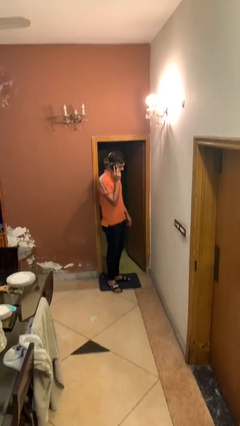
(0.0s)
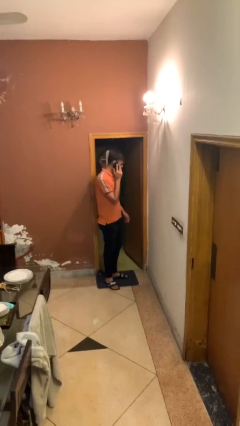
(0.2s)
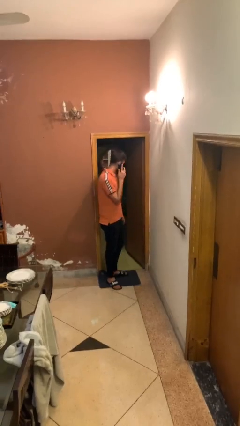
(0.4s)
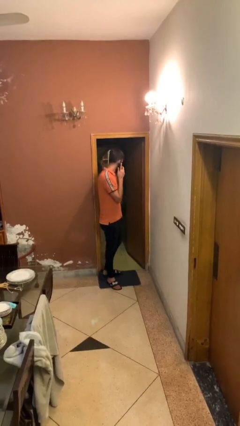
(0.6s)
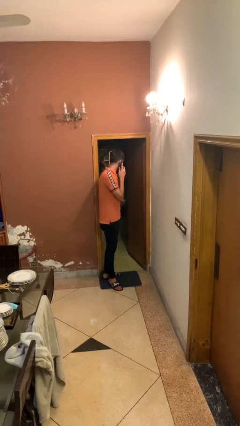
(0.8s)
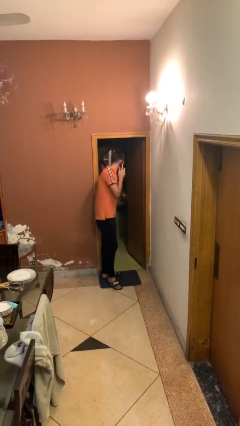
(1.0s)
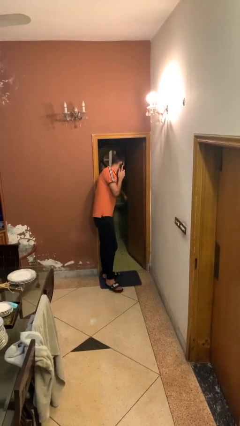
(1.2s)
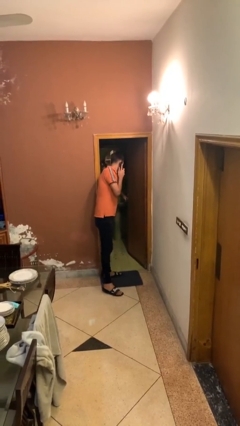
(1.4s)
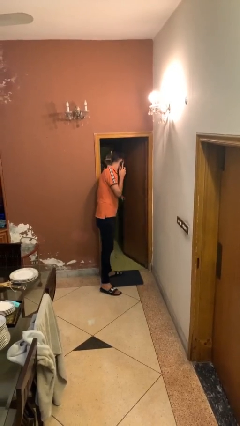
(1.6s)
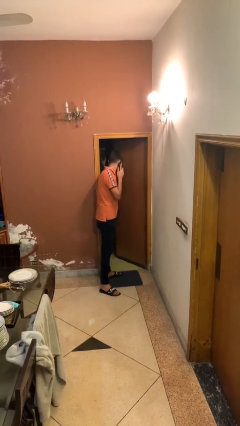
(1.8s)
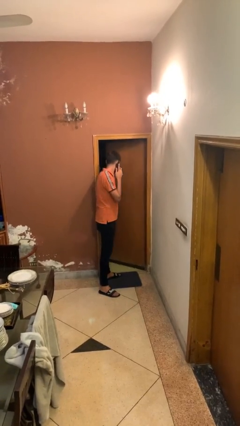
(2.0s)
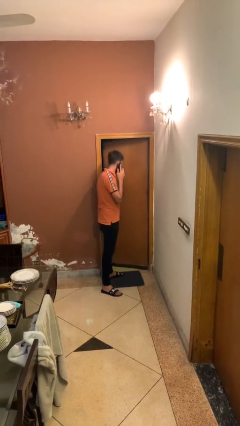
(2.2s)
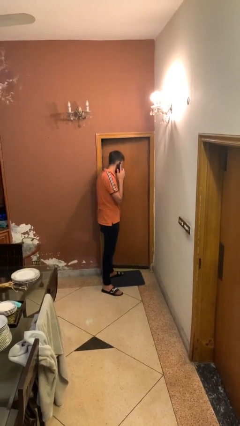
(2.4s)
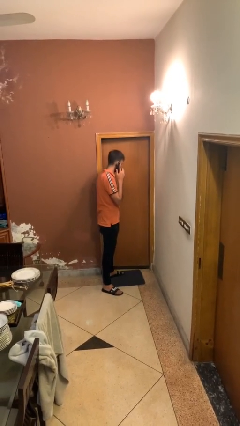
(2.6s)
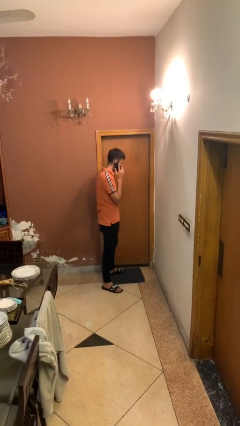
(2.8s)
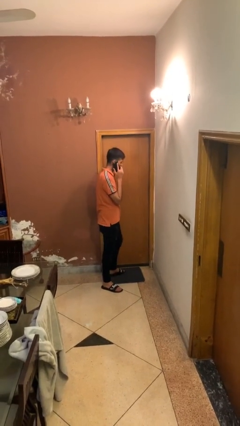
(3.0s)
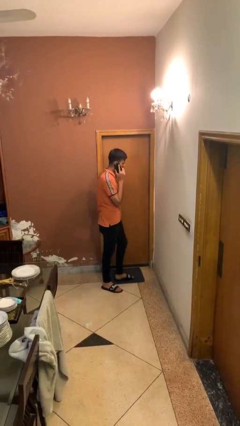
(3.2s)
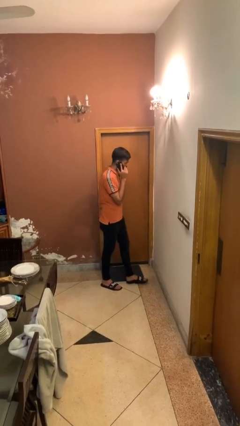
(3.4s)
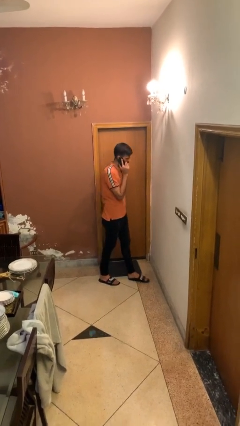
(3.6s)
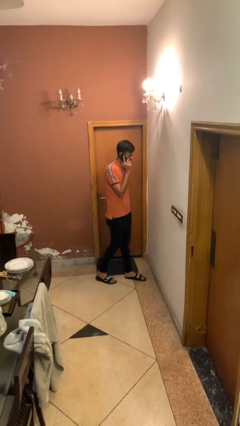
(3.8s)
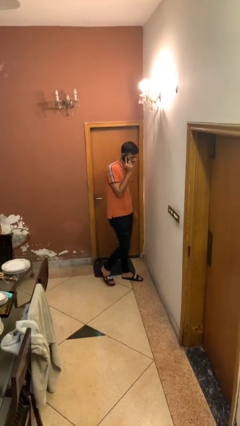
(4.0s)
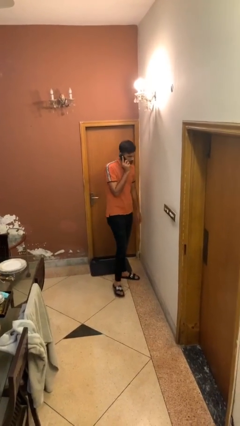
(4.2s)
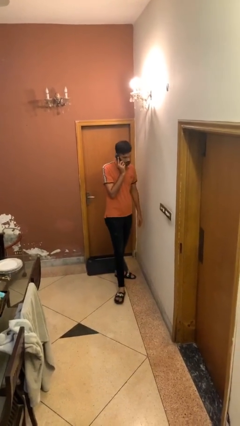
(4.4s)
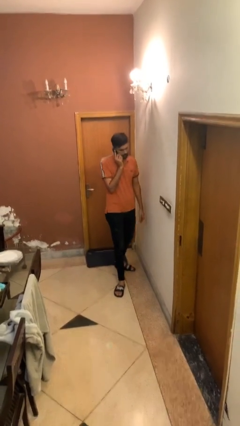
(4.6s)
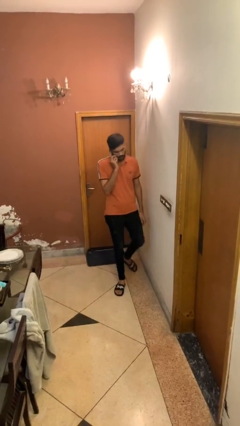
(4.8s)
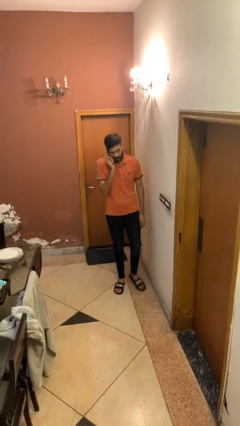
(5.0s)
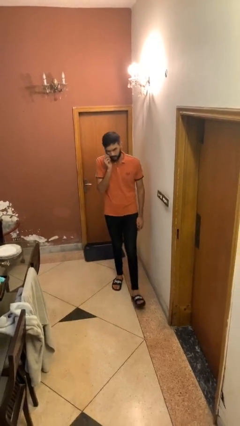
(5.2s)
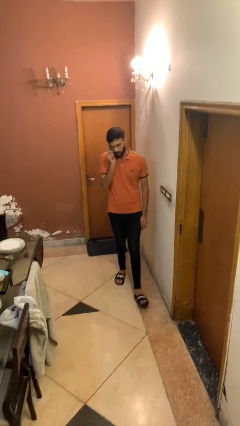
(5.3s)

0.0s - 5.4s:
person closes facility door

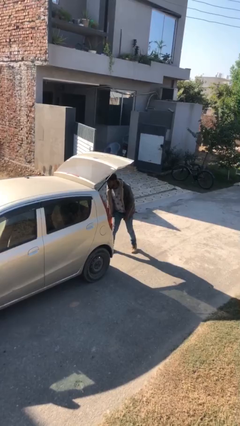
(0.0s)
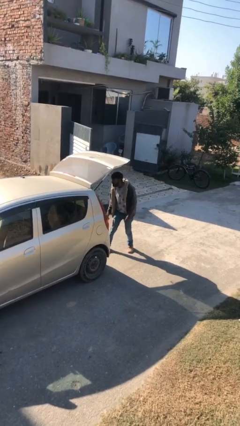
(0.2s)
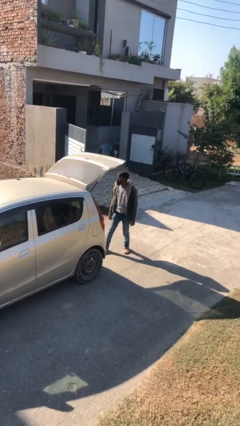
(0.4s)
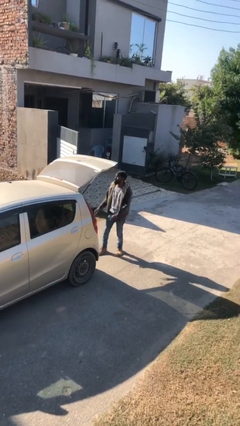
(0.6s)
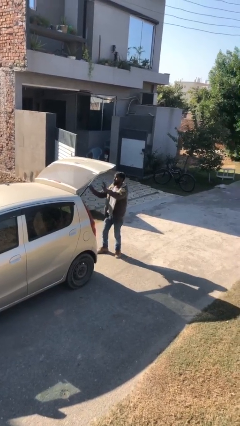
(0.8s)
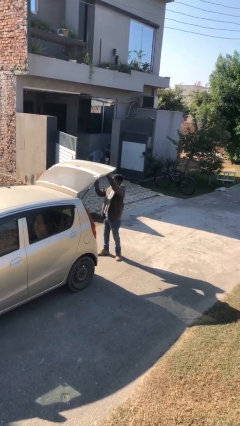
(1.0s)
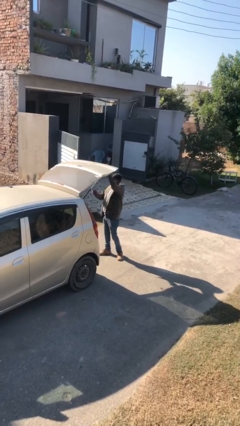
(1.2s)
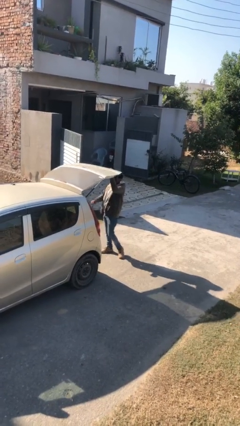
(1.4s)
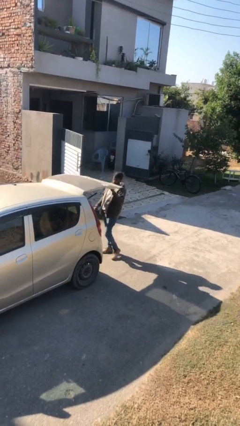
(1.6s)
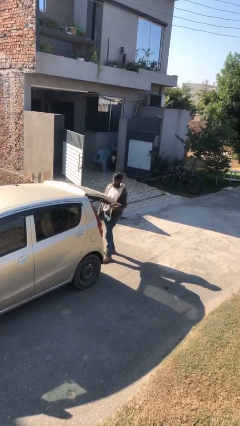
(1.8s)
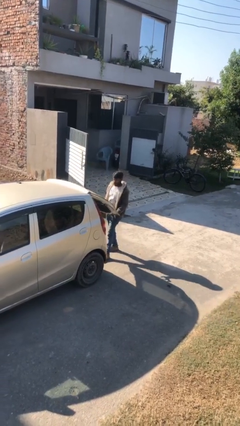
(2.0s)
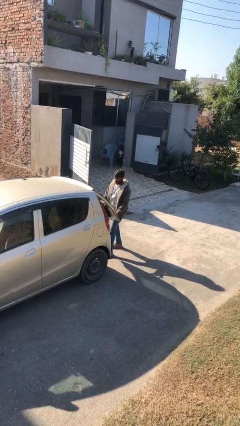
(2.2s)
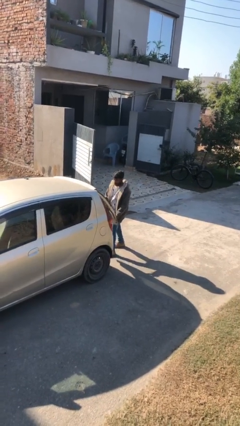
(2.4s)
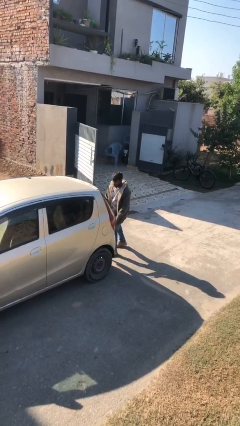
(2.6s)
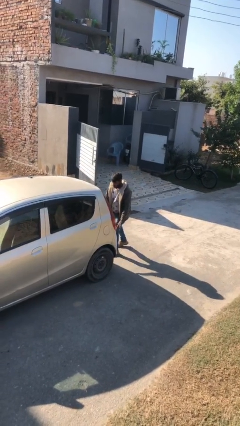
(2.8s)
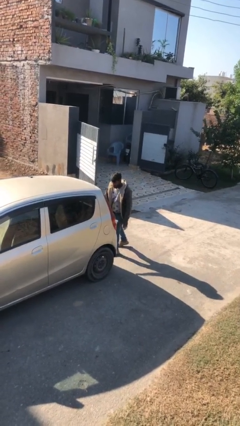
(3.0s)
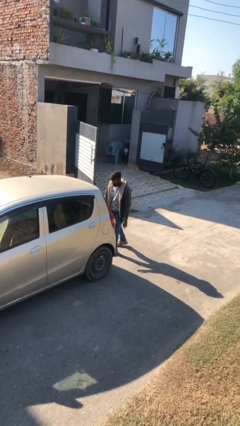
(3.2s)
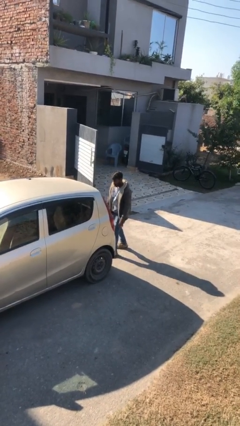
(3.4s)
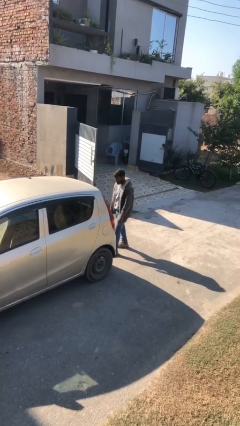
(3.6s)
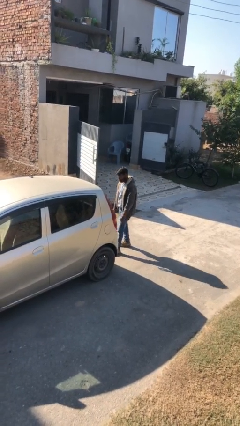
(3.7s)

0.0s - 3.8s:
person closes car trunk

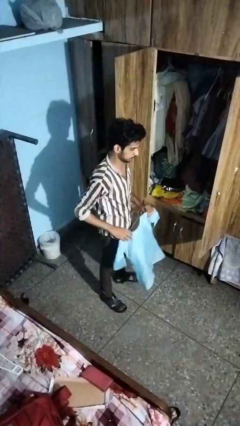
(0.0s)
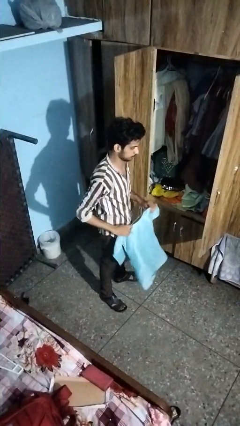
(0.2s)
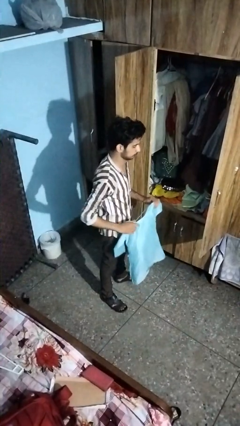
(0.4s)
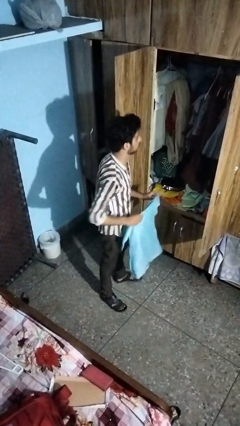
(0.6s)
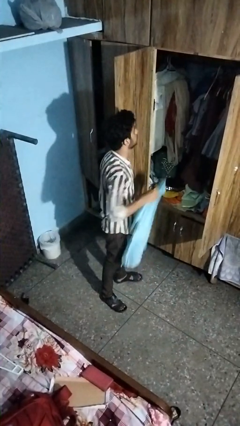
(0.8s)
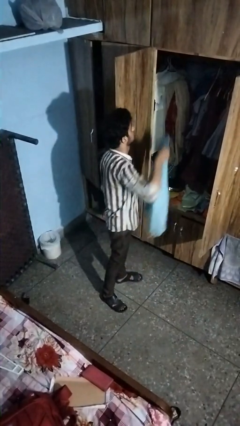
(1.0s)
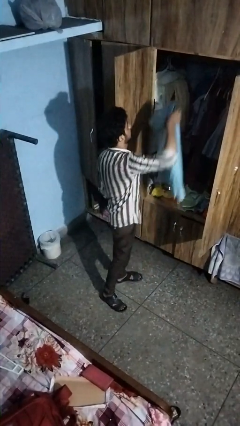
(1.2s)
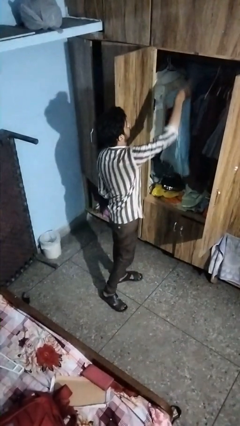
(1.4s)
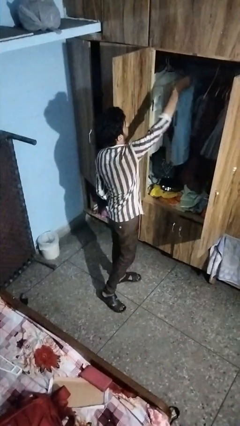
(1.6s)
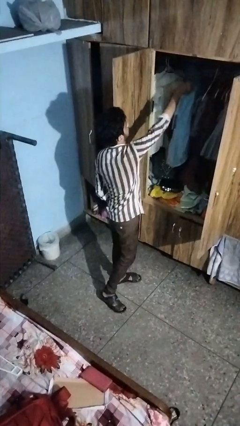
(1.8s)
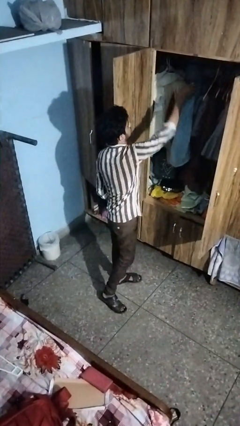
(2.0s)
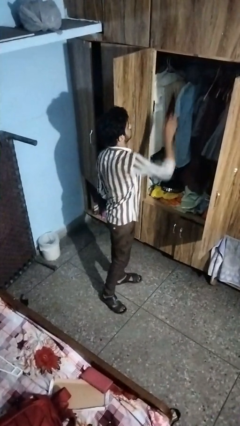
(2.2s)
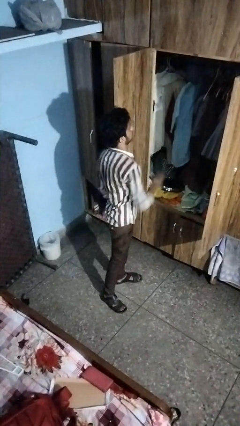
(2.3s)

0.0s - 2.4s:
person puts clothes into closet

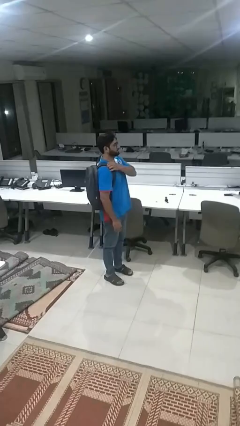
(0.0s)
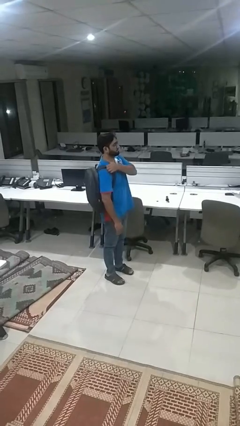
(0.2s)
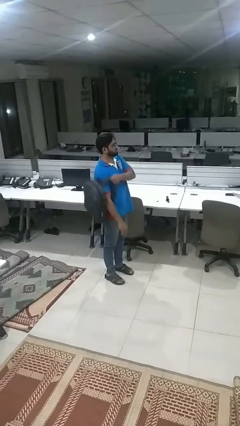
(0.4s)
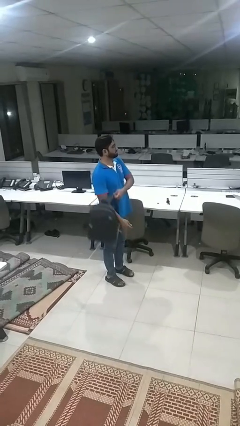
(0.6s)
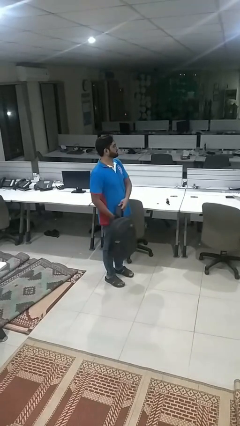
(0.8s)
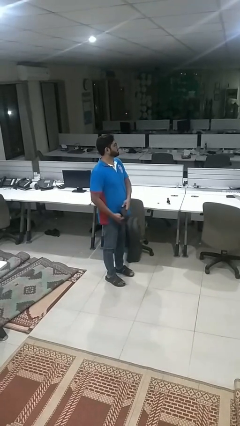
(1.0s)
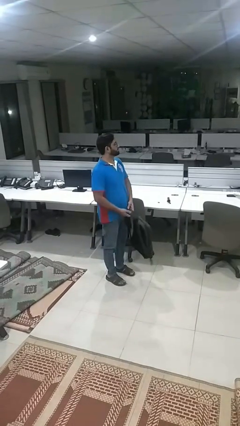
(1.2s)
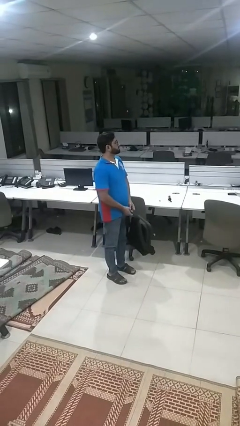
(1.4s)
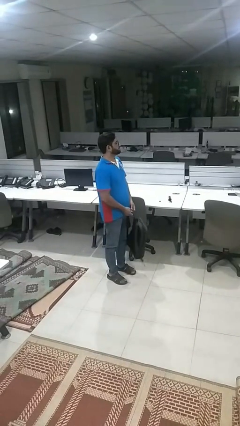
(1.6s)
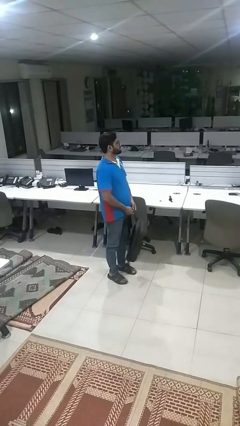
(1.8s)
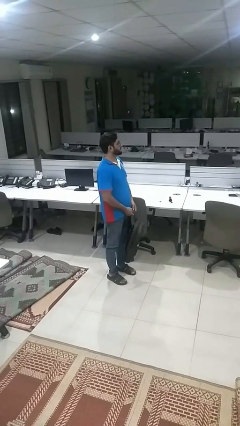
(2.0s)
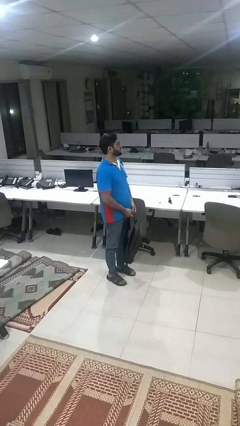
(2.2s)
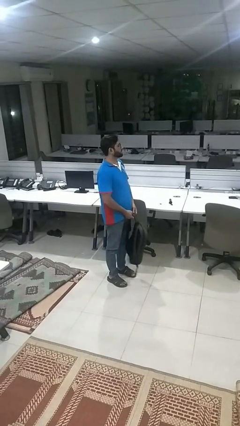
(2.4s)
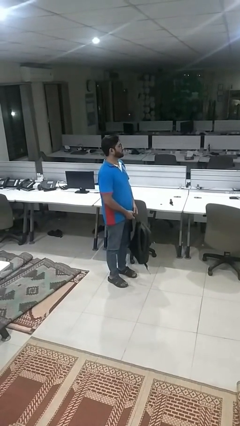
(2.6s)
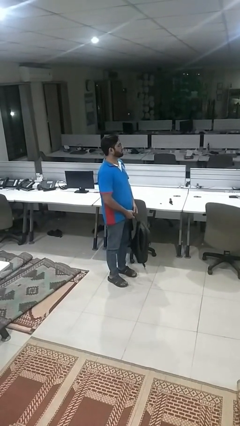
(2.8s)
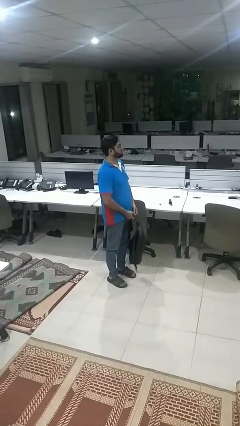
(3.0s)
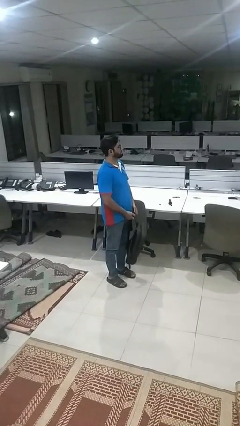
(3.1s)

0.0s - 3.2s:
person takes off backpack

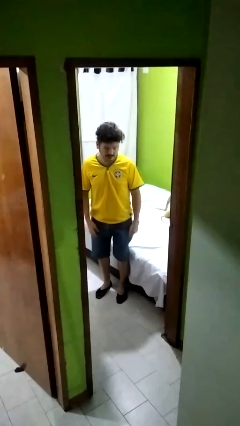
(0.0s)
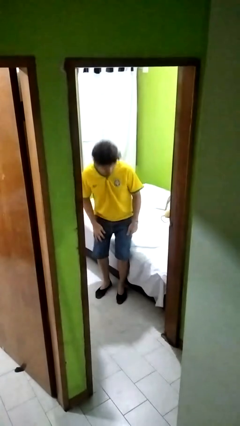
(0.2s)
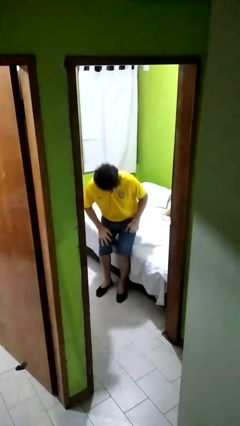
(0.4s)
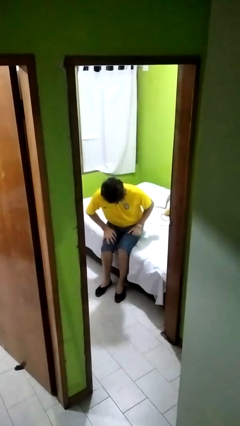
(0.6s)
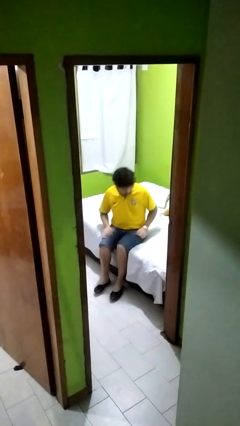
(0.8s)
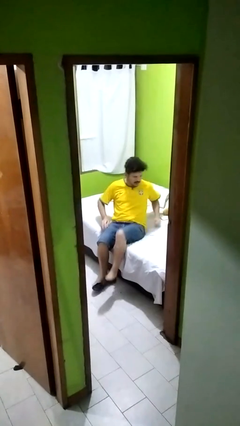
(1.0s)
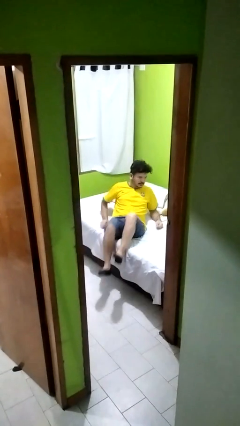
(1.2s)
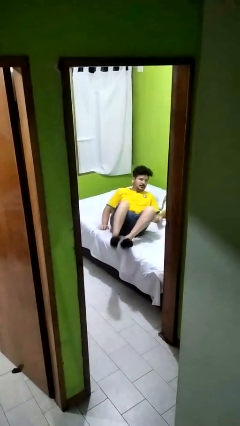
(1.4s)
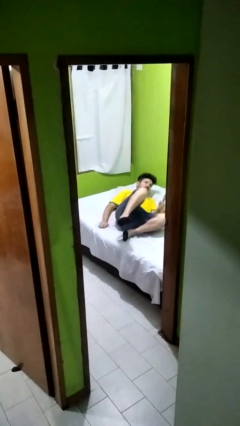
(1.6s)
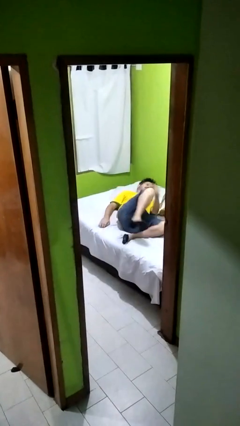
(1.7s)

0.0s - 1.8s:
person lies down on bed

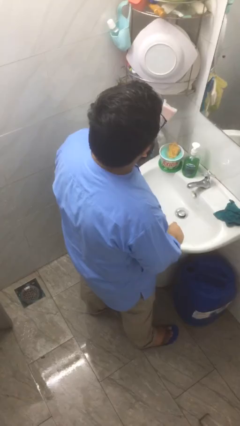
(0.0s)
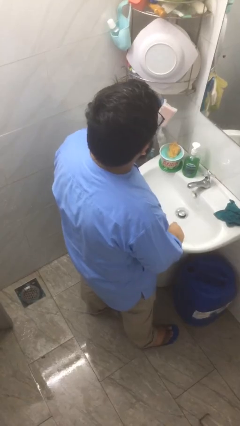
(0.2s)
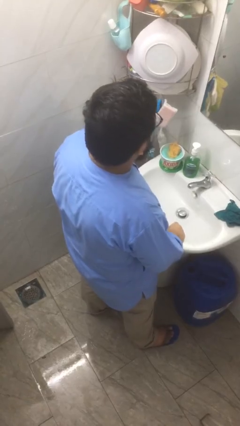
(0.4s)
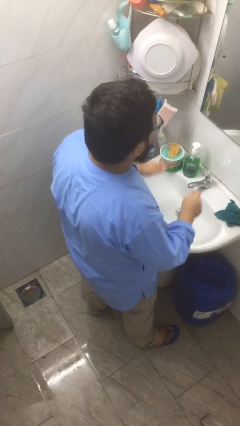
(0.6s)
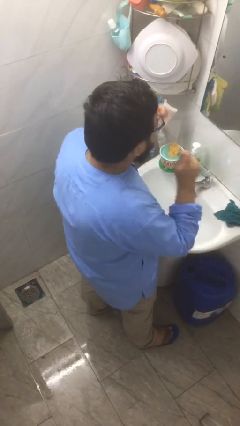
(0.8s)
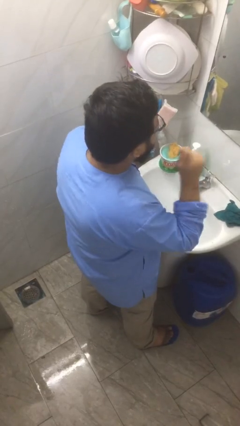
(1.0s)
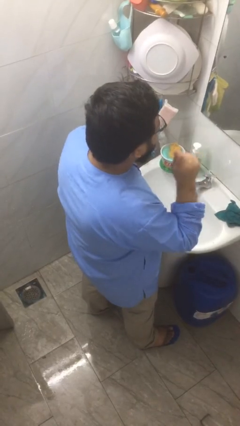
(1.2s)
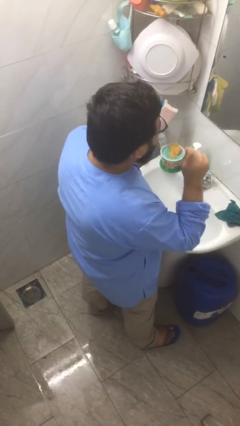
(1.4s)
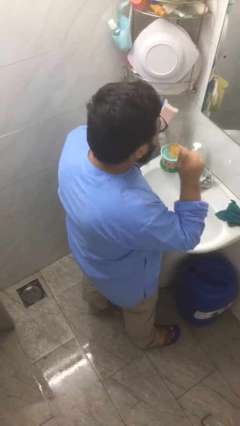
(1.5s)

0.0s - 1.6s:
person flosses
